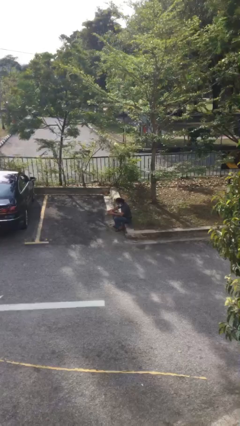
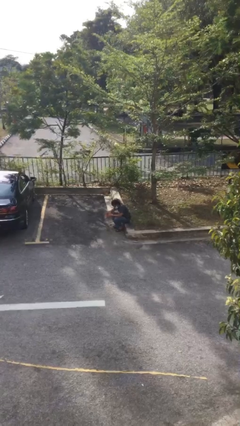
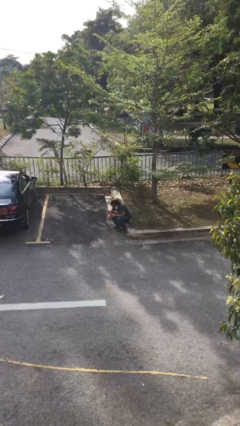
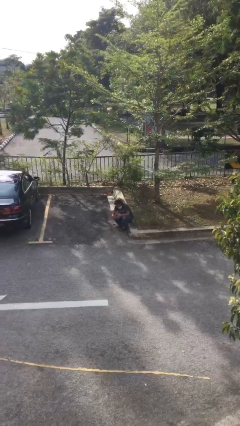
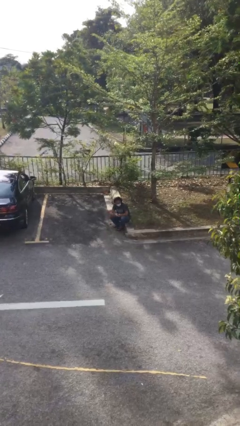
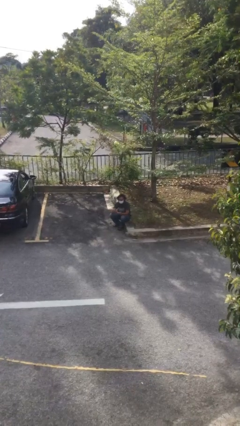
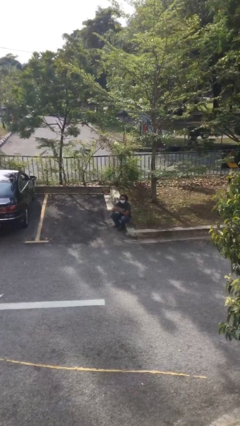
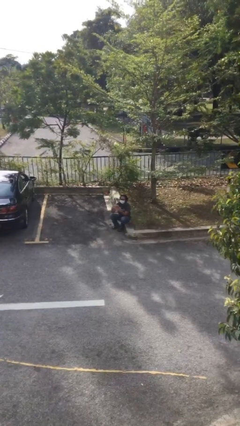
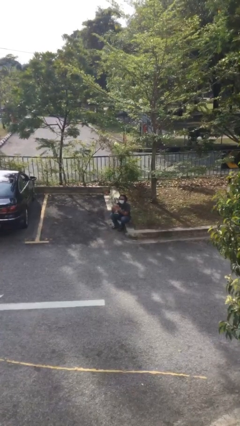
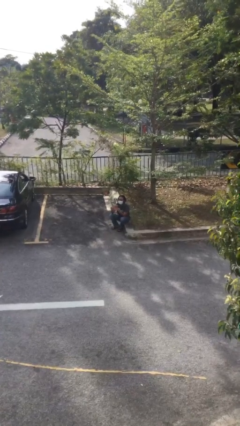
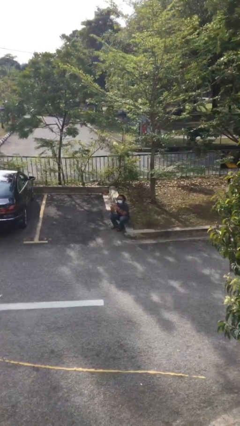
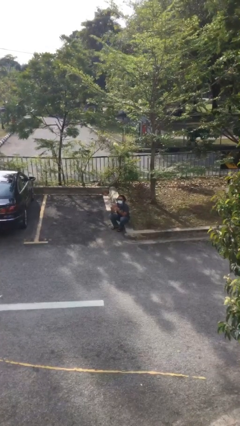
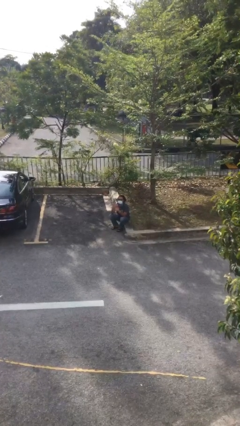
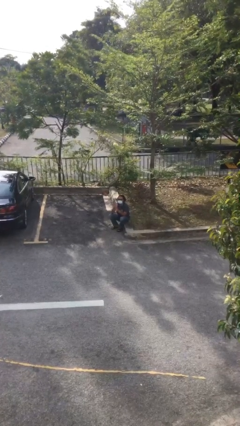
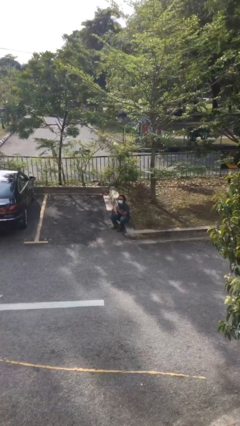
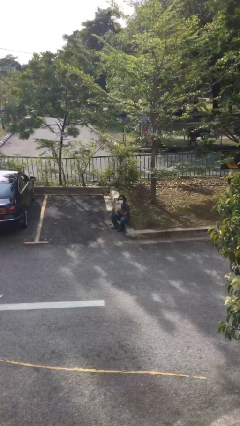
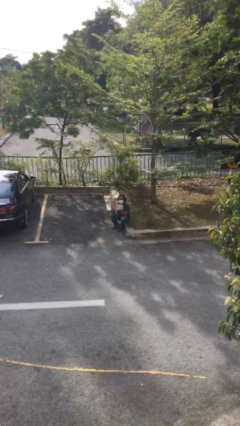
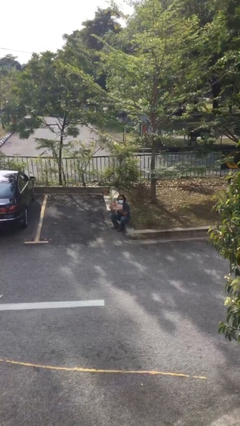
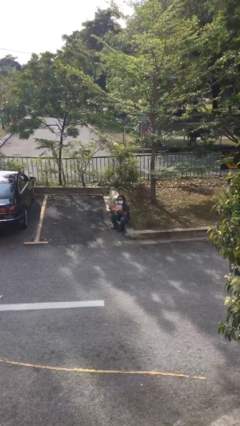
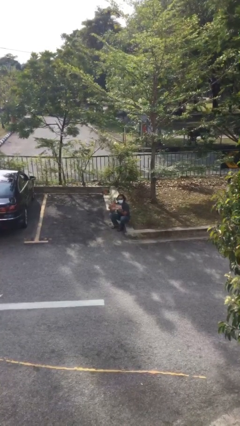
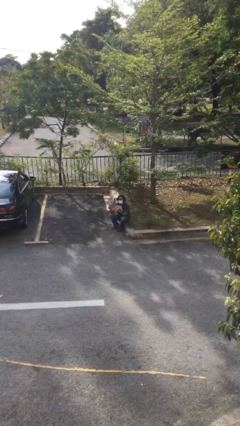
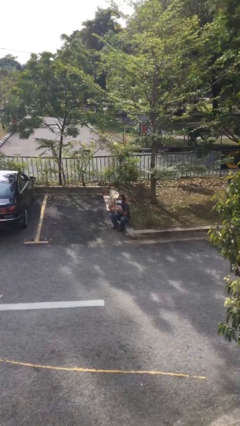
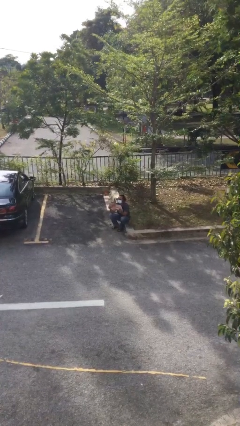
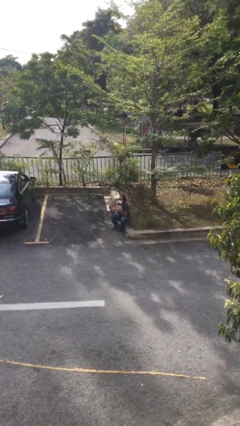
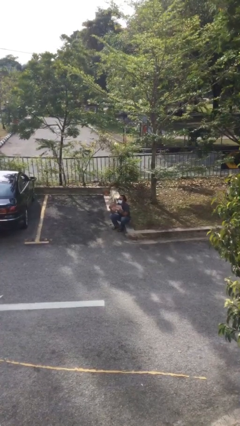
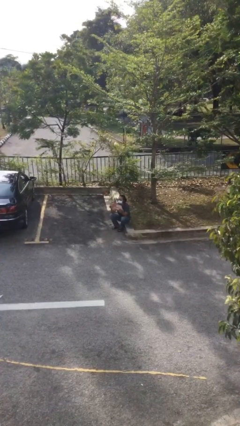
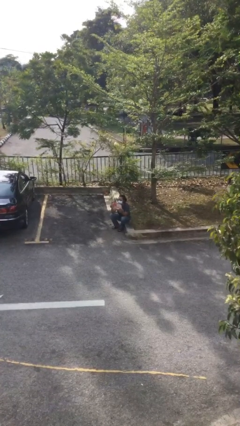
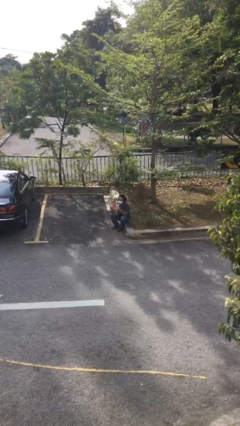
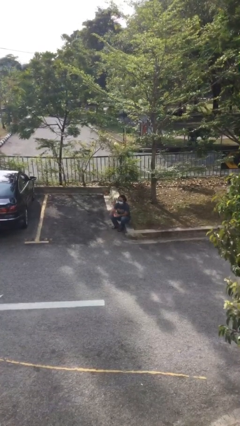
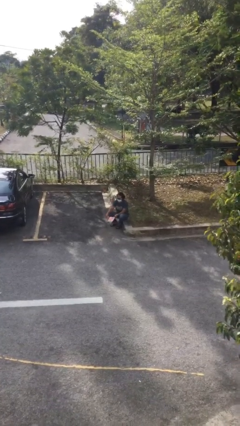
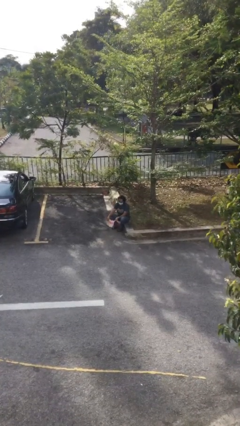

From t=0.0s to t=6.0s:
person reads document

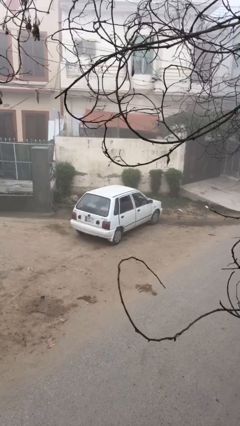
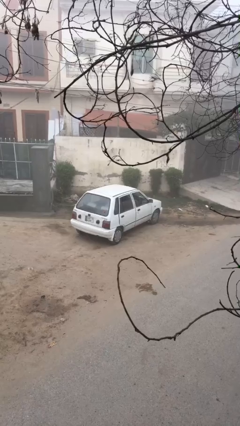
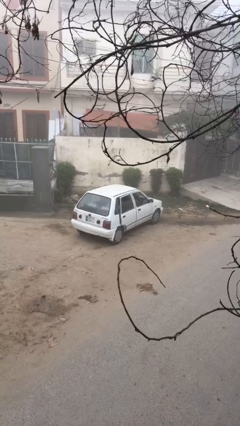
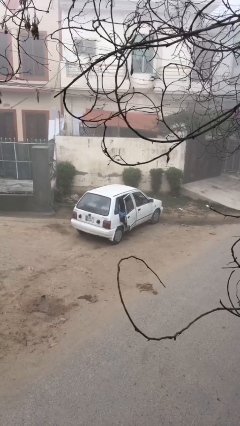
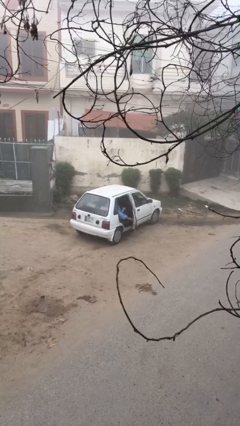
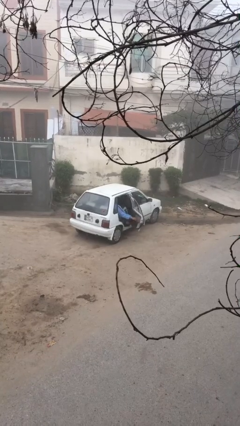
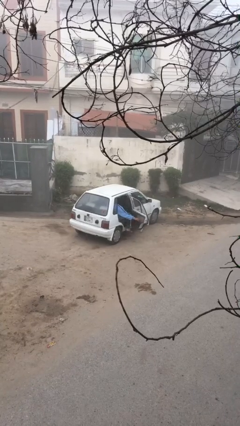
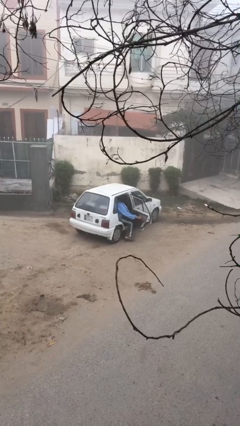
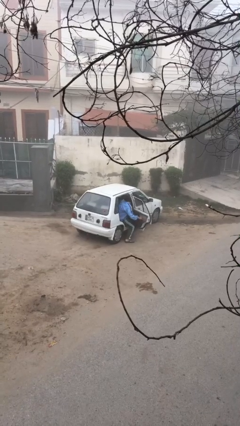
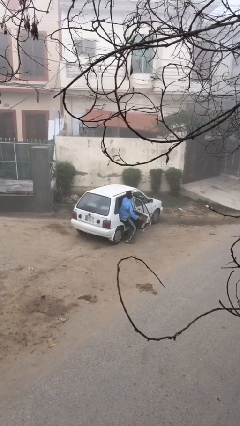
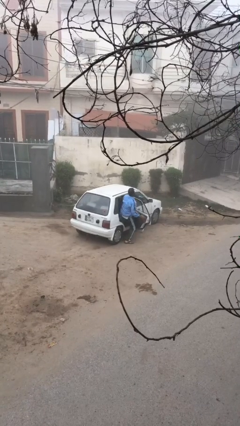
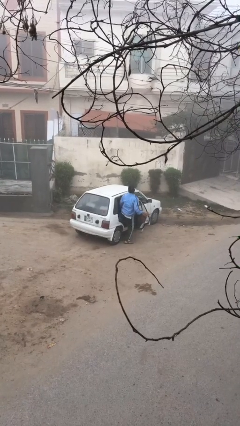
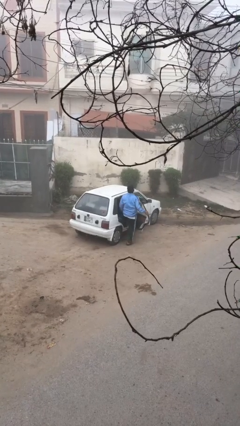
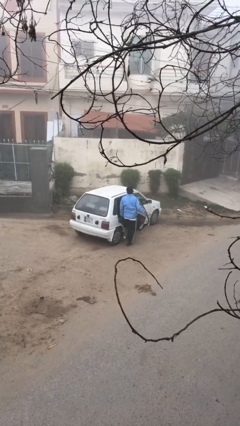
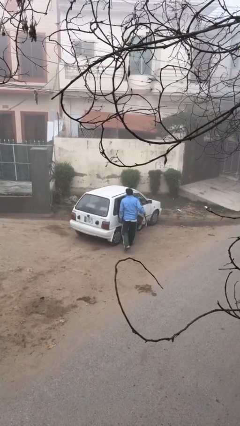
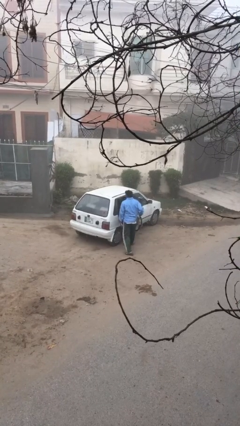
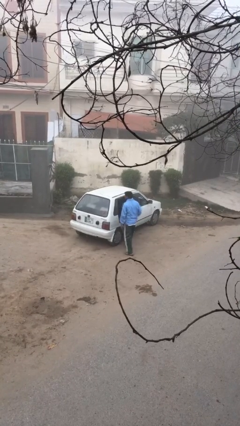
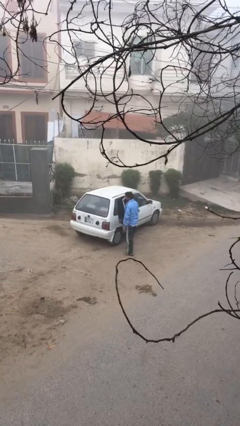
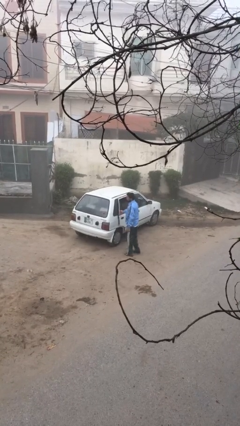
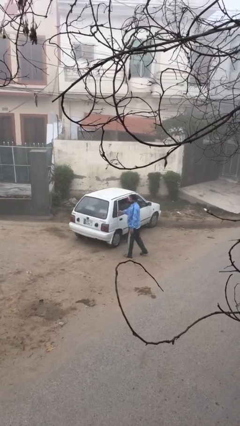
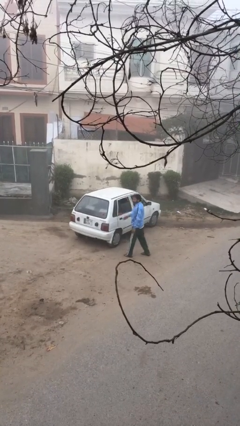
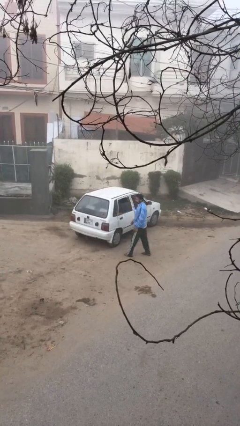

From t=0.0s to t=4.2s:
car drops off person

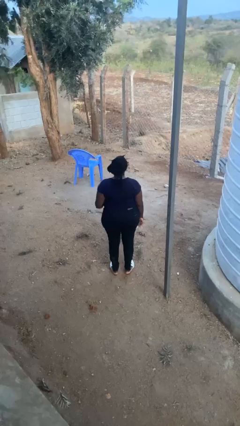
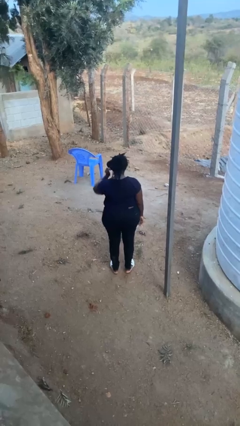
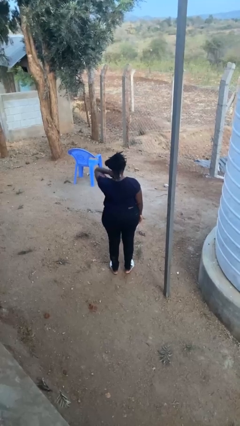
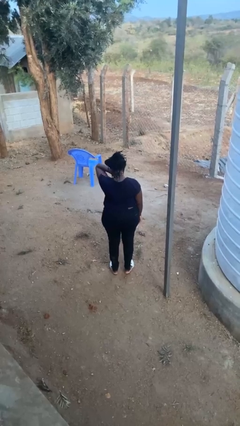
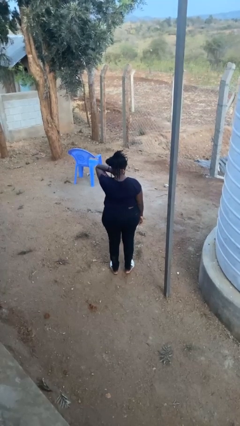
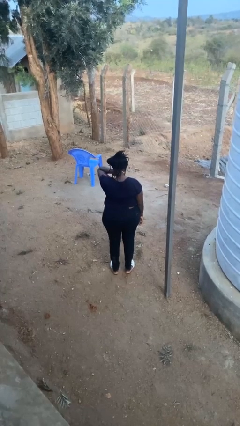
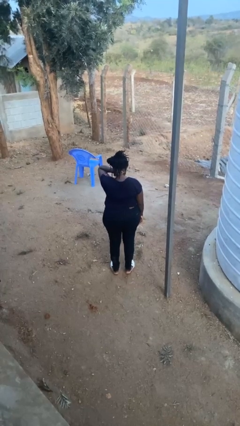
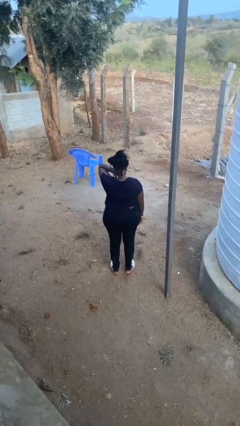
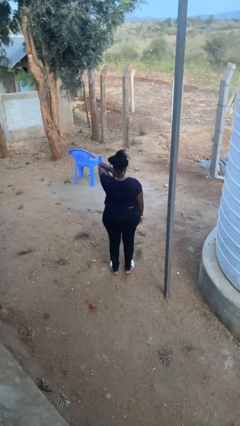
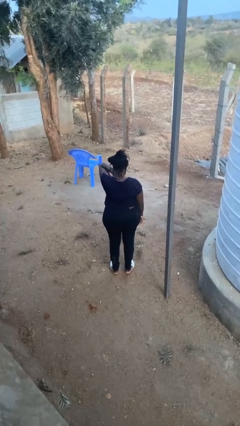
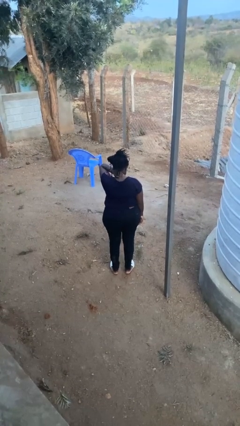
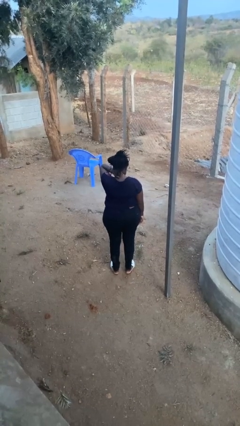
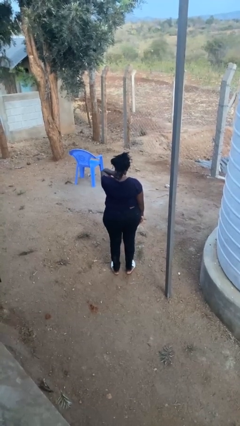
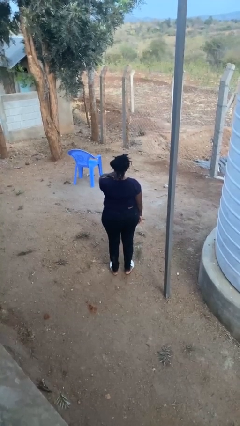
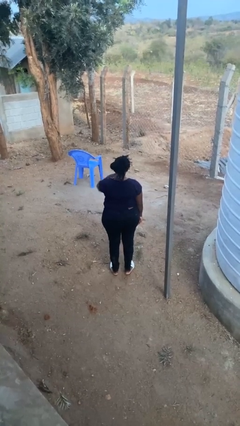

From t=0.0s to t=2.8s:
person rubs neck

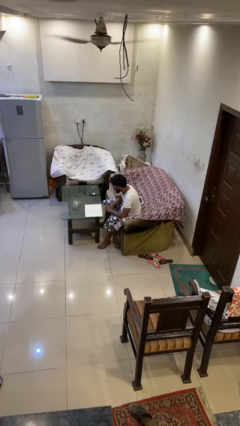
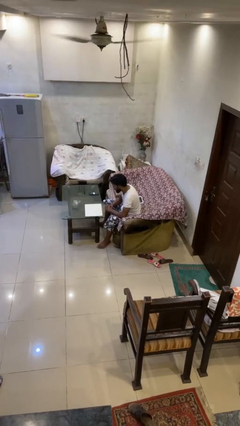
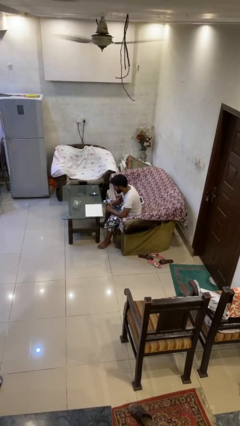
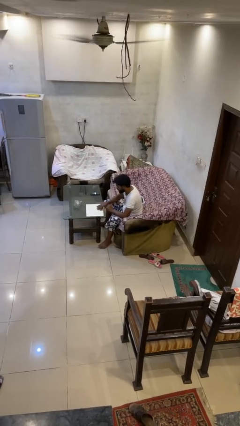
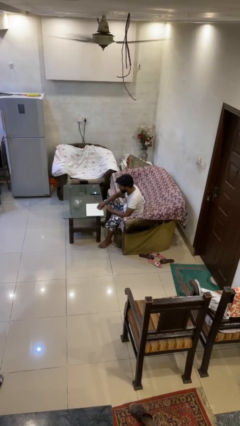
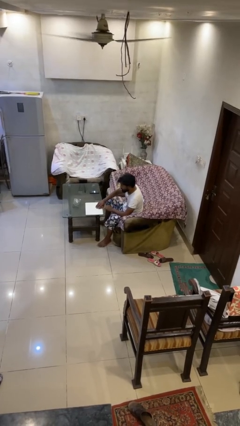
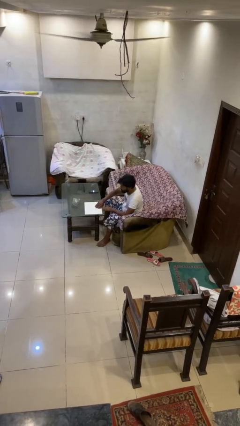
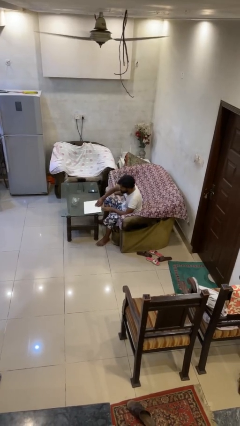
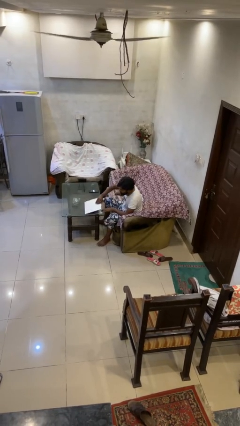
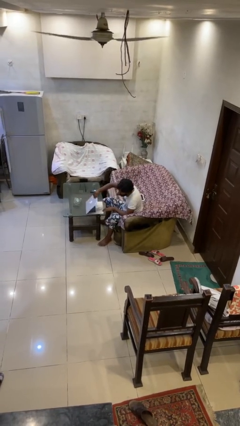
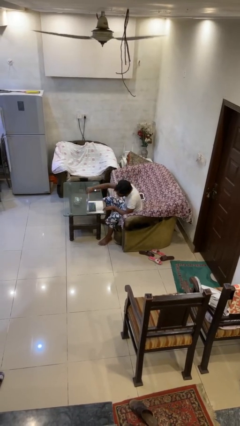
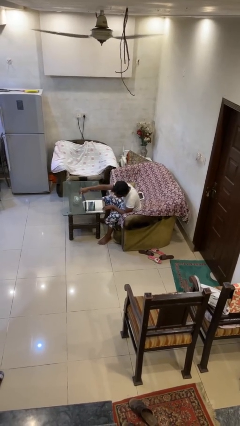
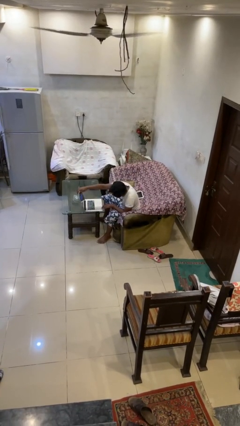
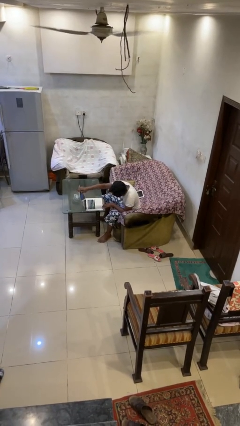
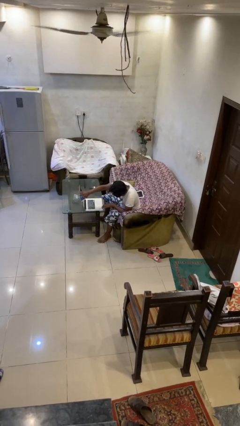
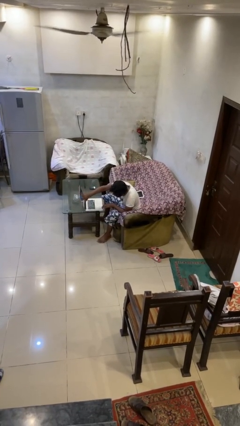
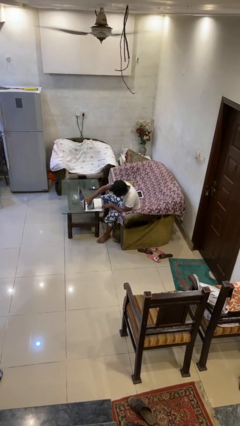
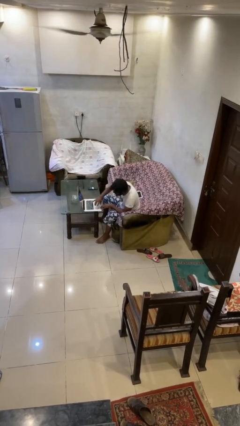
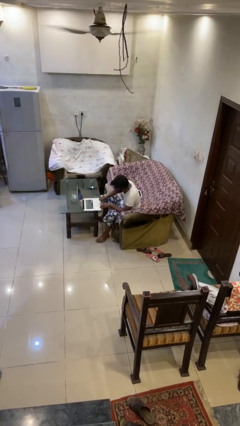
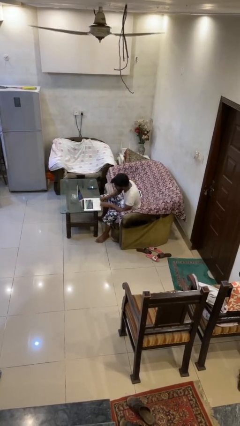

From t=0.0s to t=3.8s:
person opens laptop

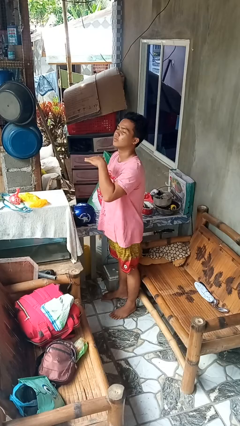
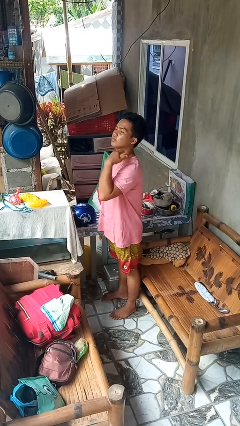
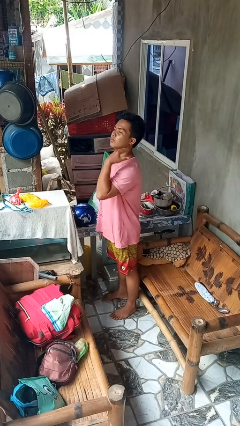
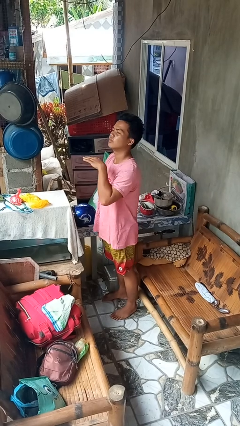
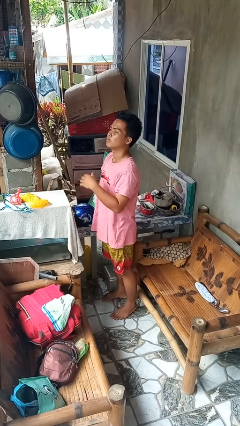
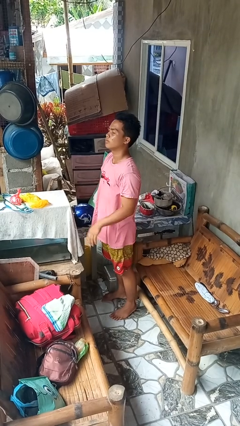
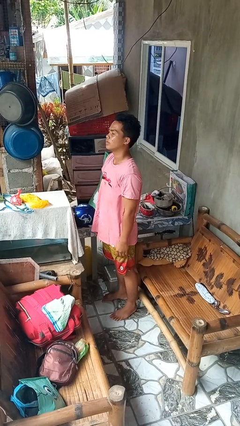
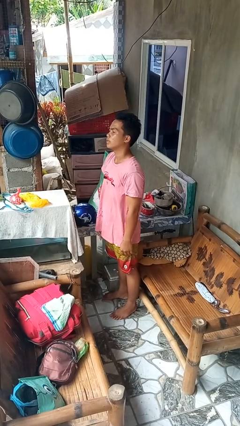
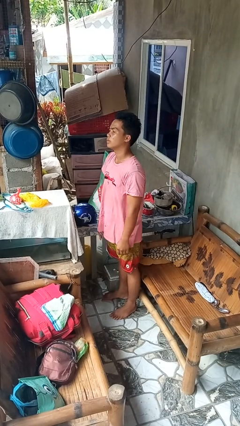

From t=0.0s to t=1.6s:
person gestures cut
